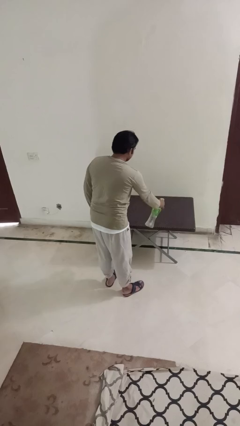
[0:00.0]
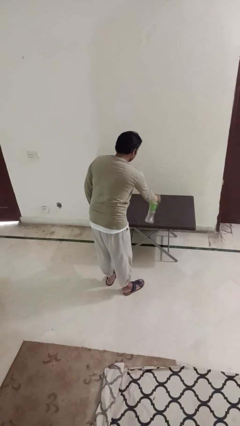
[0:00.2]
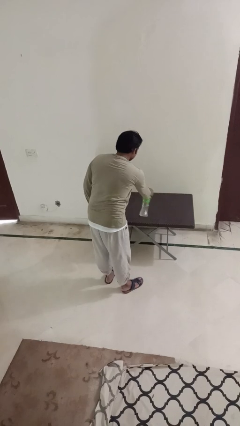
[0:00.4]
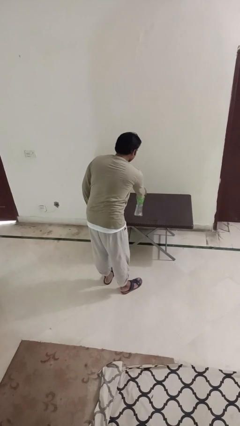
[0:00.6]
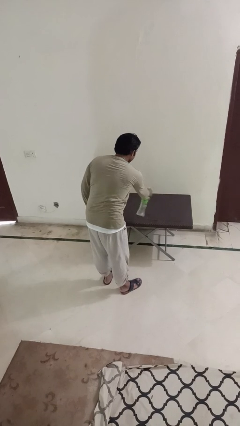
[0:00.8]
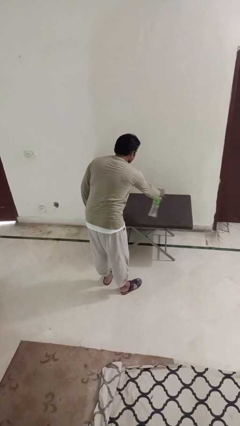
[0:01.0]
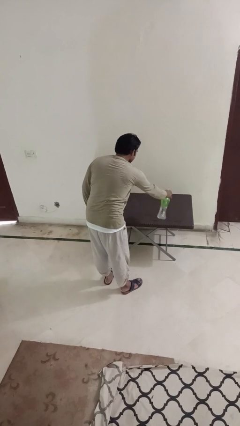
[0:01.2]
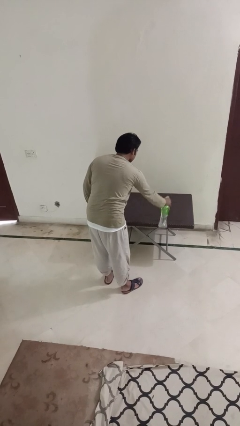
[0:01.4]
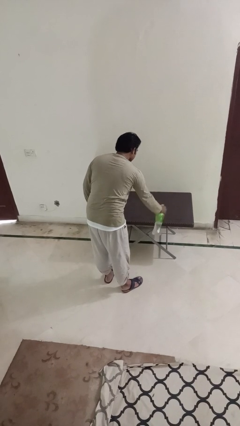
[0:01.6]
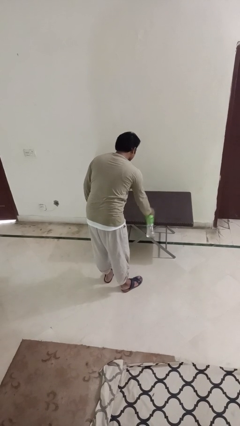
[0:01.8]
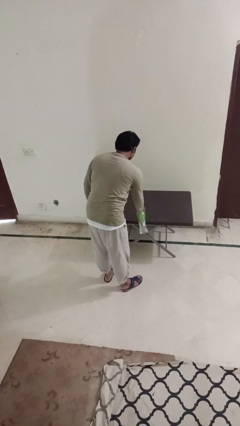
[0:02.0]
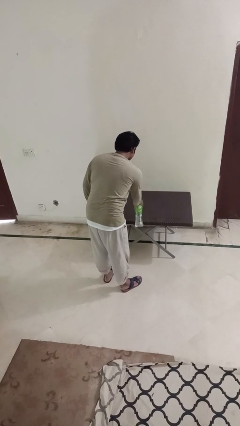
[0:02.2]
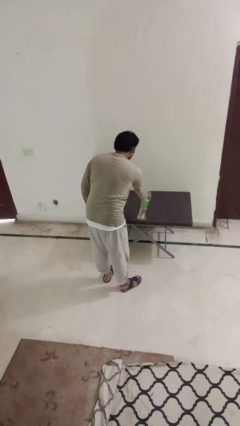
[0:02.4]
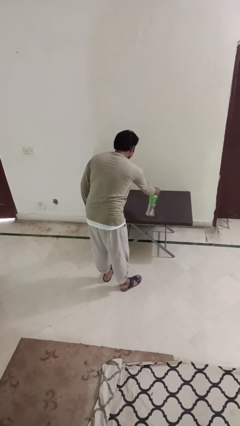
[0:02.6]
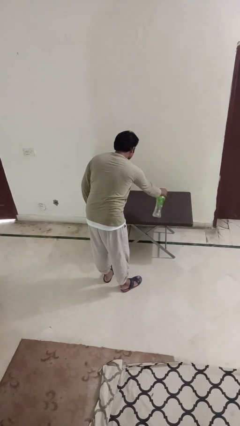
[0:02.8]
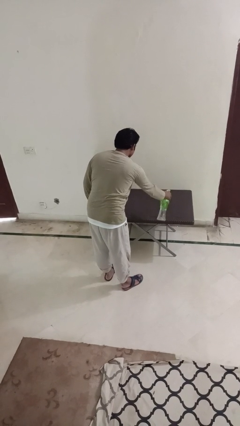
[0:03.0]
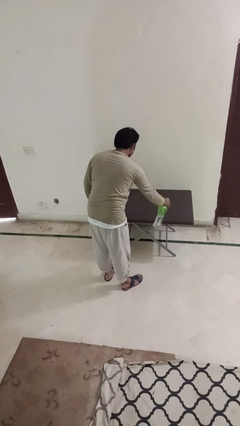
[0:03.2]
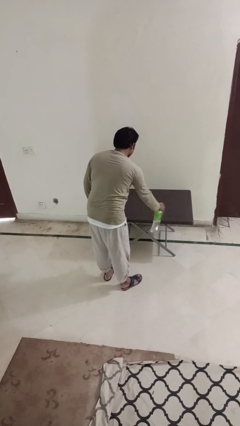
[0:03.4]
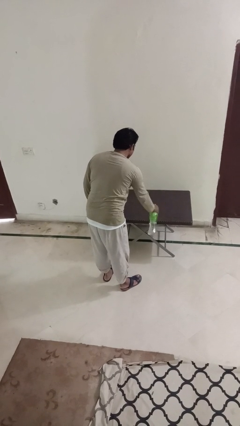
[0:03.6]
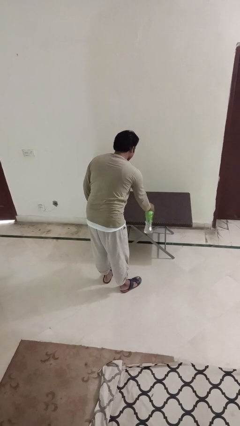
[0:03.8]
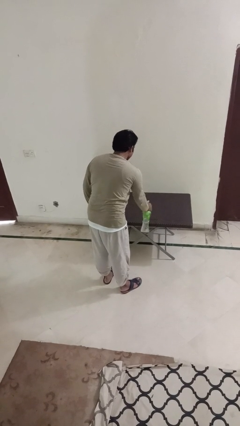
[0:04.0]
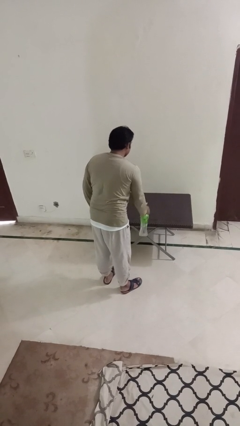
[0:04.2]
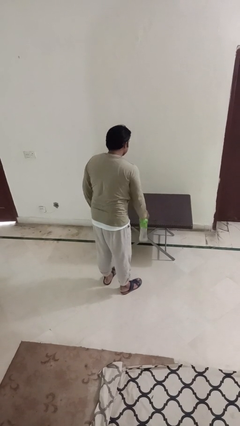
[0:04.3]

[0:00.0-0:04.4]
person sprays from bottle

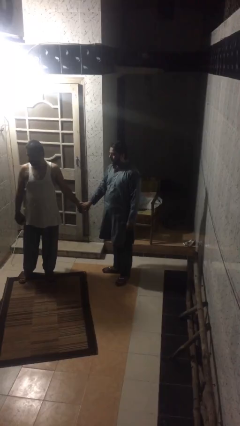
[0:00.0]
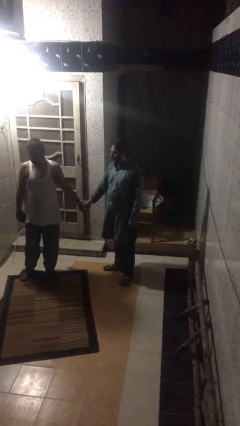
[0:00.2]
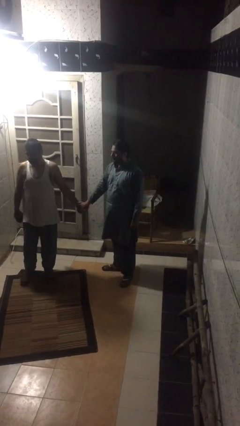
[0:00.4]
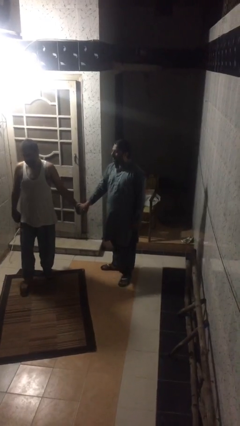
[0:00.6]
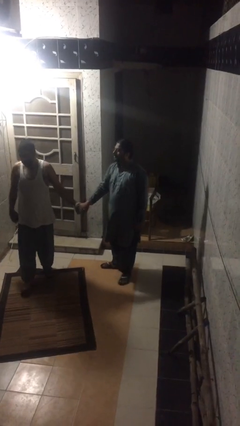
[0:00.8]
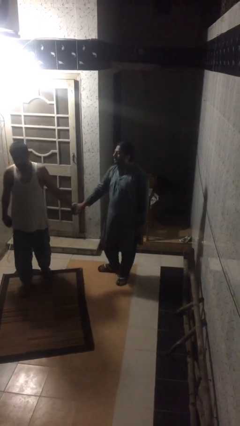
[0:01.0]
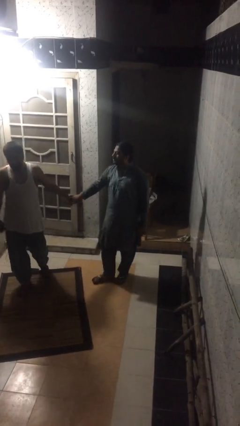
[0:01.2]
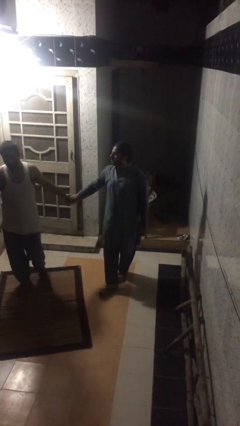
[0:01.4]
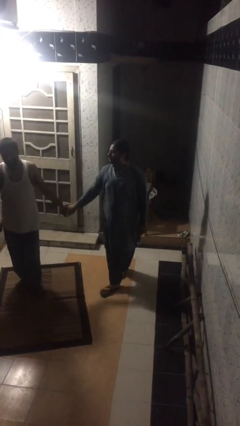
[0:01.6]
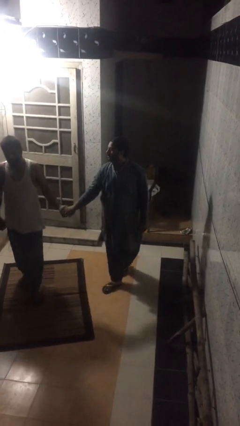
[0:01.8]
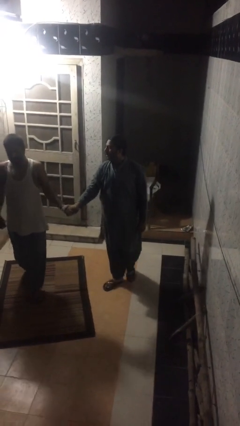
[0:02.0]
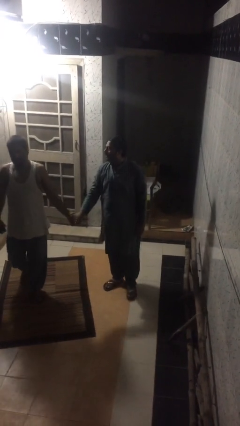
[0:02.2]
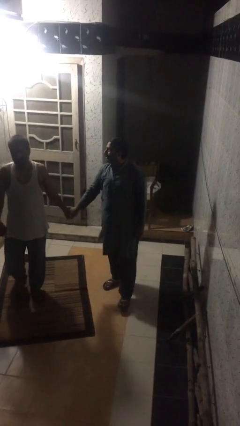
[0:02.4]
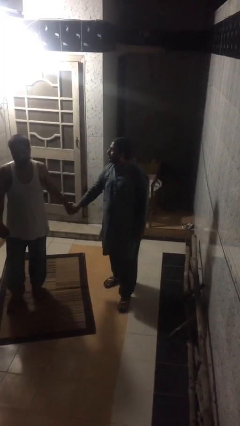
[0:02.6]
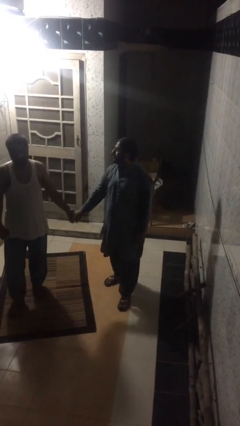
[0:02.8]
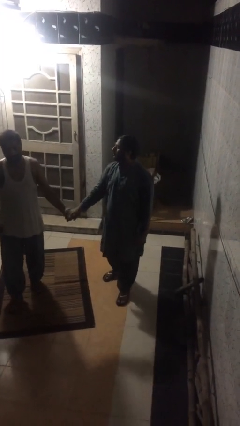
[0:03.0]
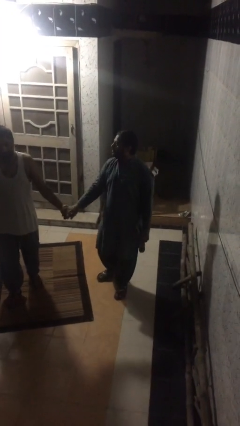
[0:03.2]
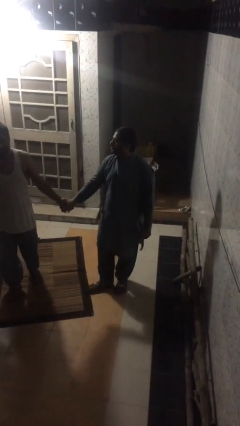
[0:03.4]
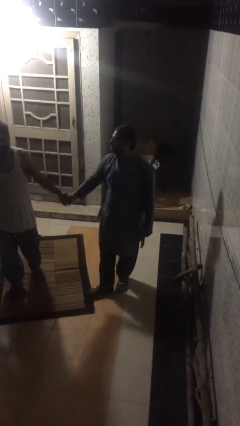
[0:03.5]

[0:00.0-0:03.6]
person holds hand

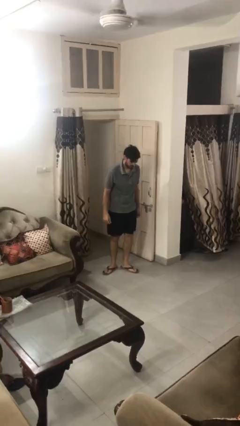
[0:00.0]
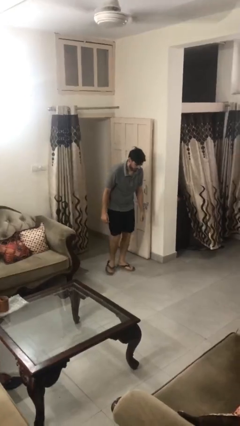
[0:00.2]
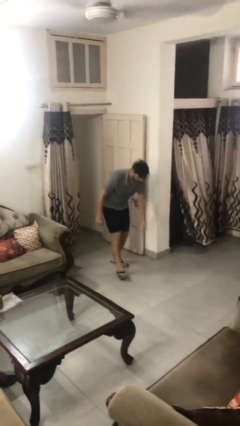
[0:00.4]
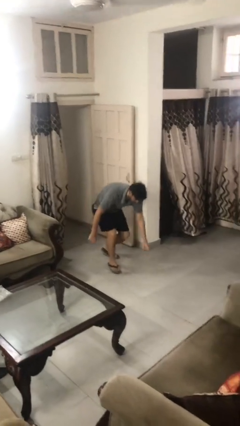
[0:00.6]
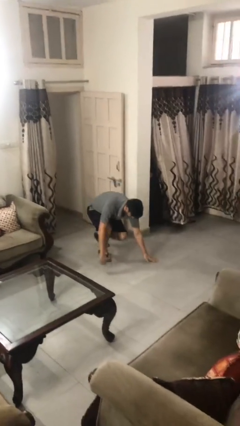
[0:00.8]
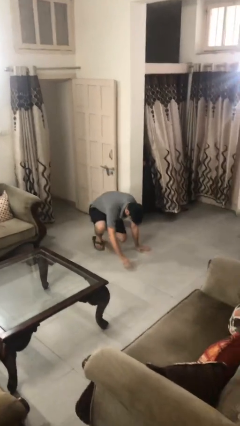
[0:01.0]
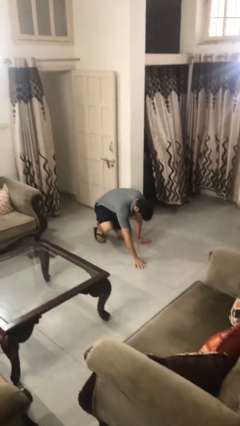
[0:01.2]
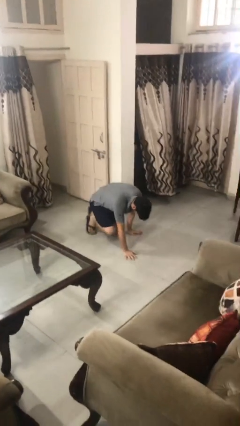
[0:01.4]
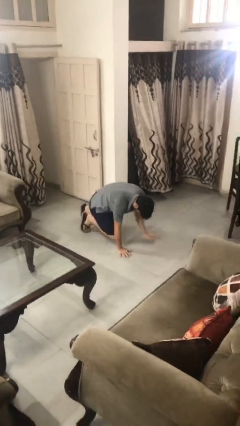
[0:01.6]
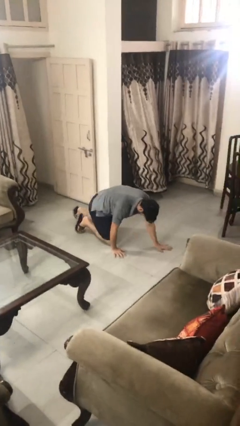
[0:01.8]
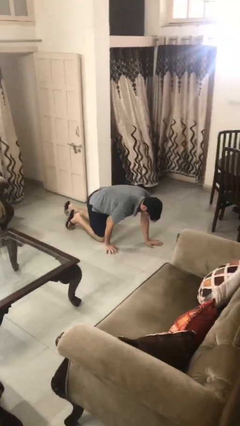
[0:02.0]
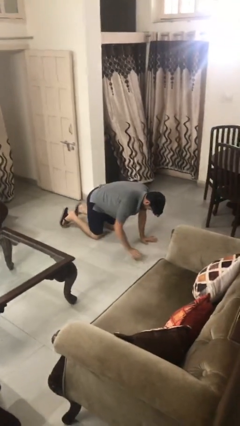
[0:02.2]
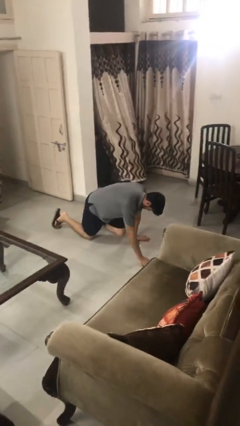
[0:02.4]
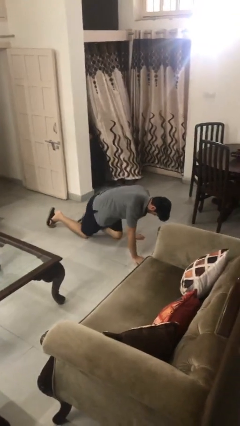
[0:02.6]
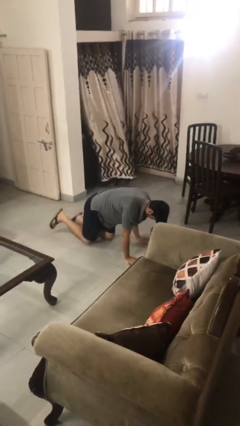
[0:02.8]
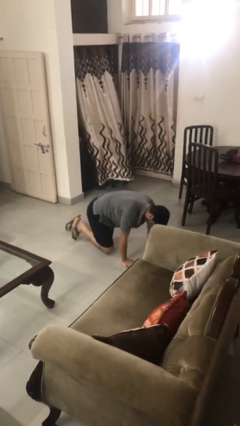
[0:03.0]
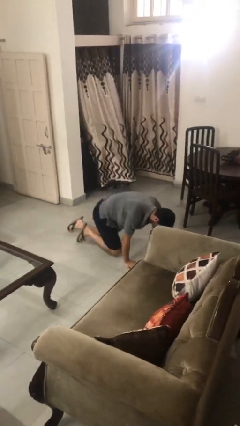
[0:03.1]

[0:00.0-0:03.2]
person crawls

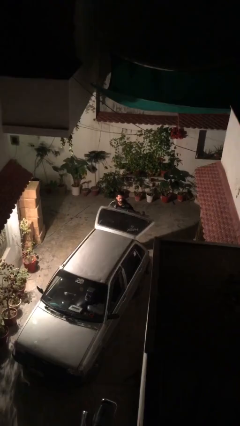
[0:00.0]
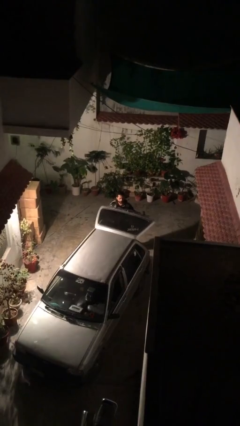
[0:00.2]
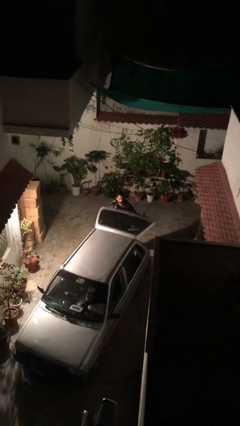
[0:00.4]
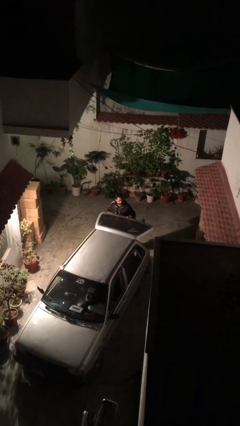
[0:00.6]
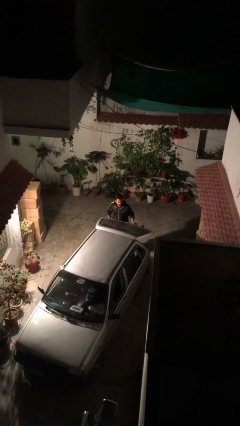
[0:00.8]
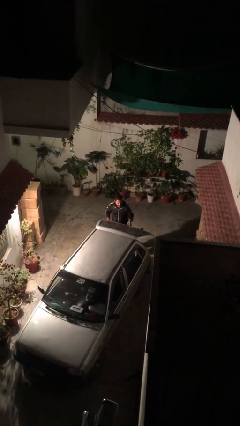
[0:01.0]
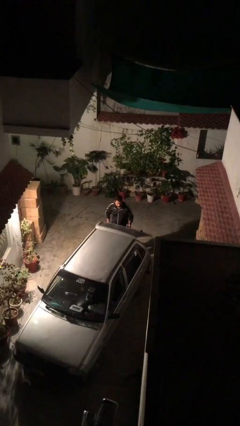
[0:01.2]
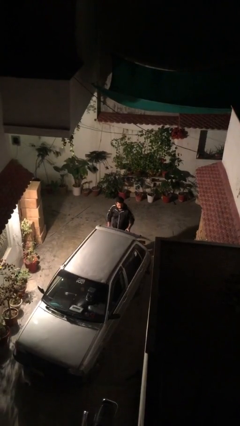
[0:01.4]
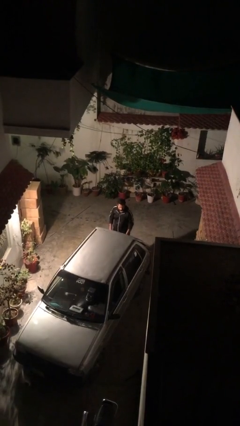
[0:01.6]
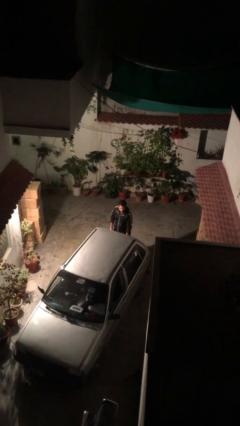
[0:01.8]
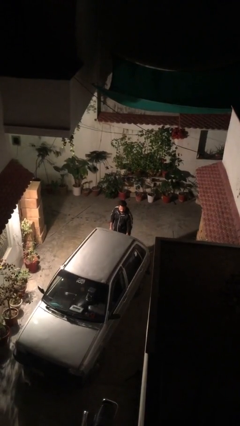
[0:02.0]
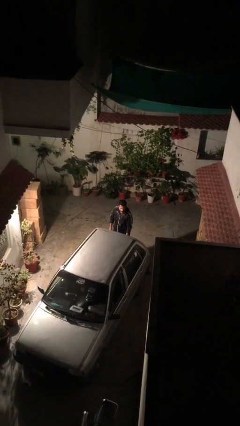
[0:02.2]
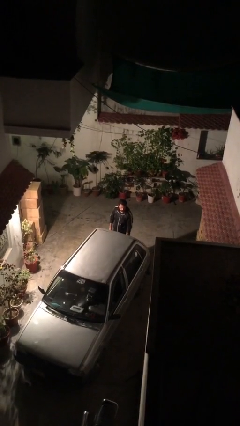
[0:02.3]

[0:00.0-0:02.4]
person closes car trunk

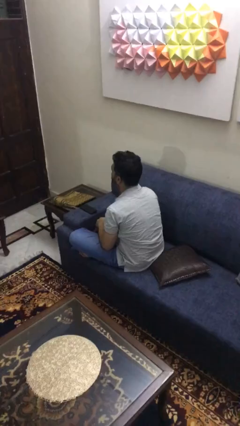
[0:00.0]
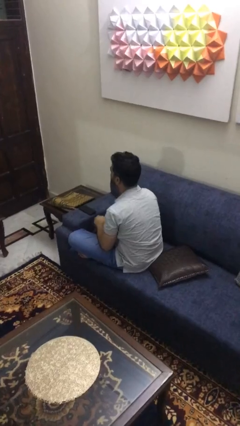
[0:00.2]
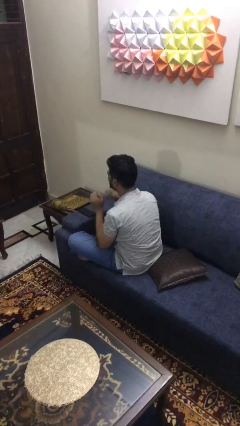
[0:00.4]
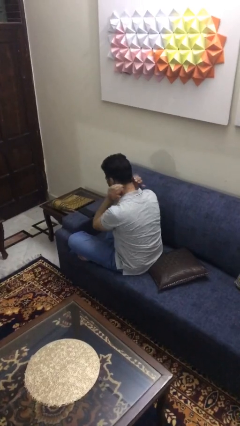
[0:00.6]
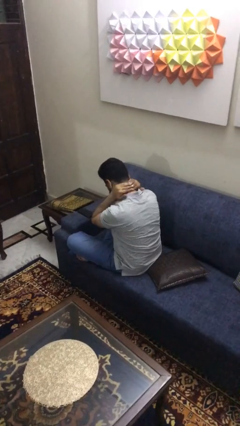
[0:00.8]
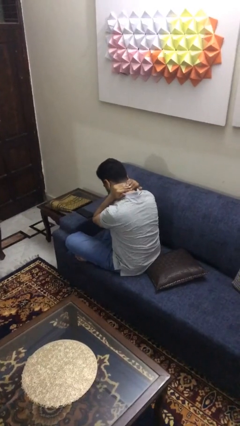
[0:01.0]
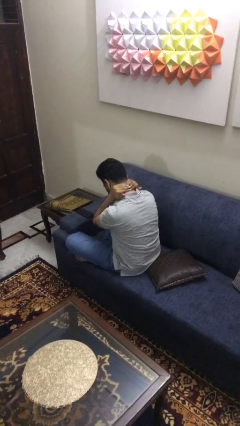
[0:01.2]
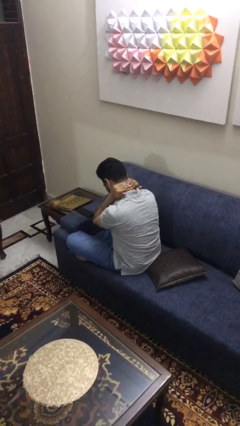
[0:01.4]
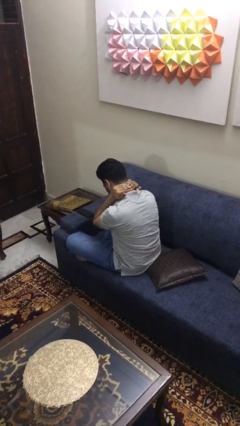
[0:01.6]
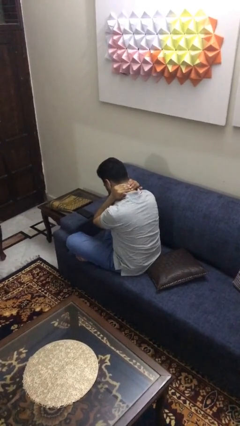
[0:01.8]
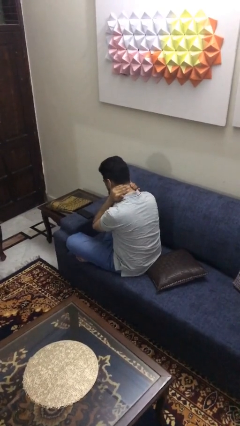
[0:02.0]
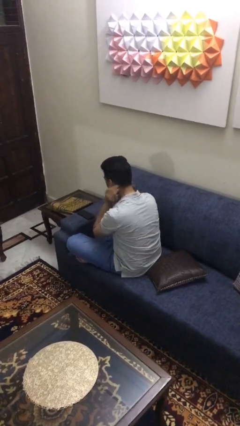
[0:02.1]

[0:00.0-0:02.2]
person rubs neck

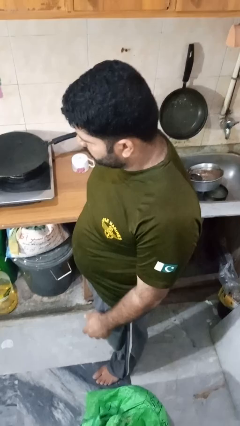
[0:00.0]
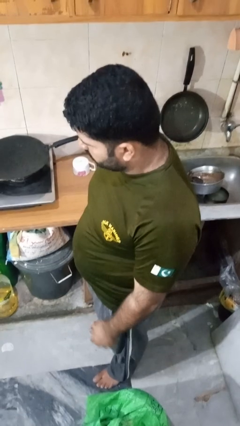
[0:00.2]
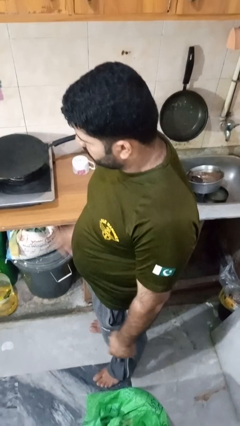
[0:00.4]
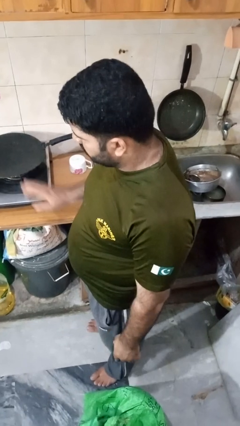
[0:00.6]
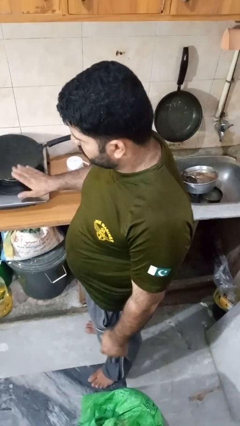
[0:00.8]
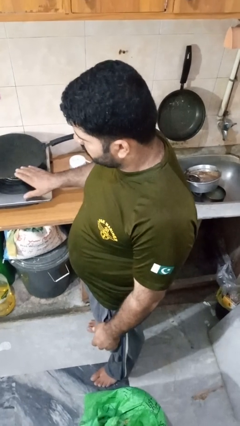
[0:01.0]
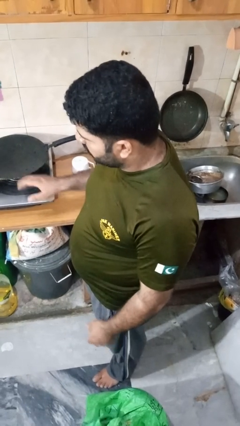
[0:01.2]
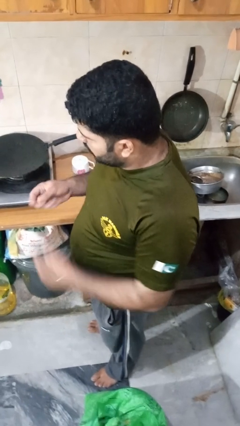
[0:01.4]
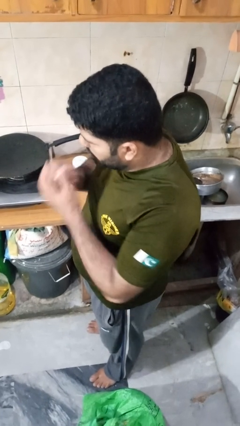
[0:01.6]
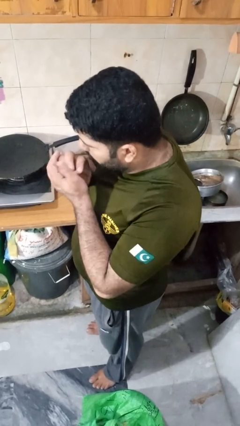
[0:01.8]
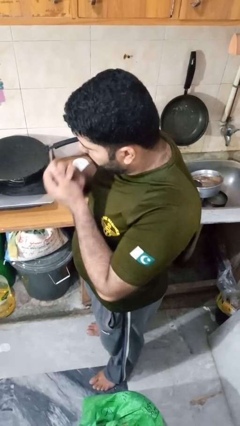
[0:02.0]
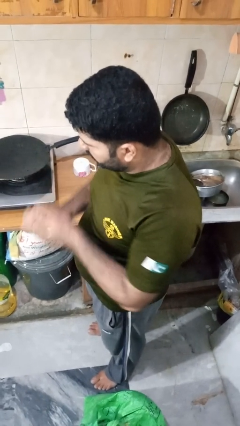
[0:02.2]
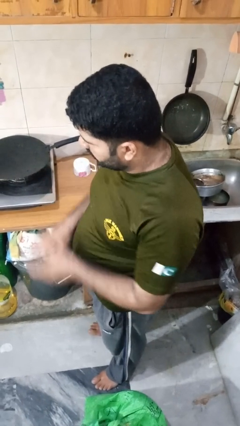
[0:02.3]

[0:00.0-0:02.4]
person burns hand
